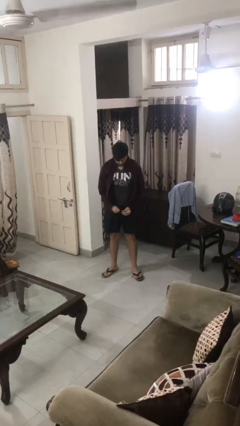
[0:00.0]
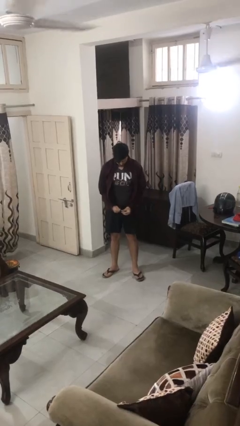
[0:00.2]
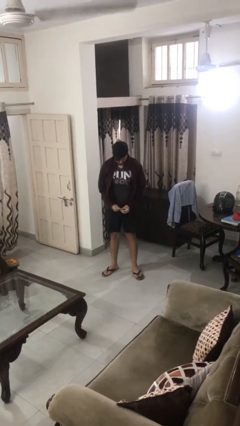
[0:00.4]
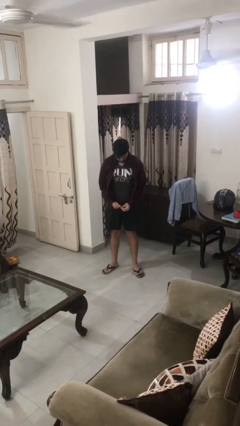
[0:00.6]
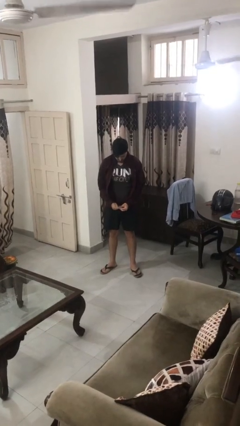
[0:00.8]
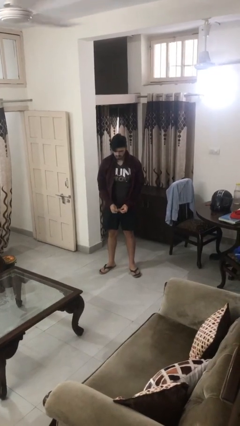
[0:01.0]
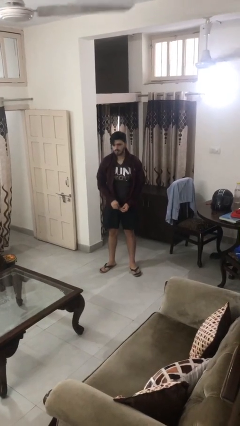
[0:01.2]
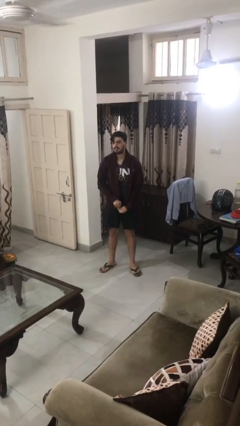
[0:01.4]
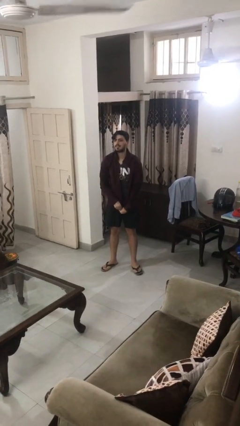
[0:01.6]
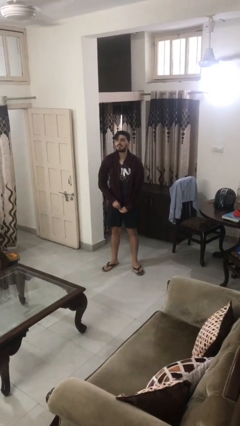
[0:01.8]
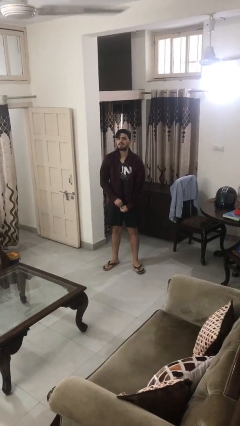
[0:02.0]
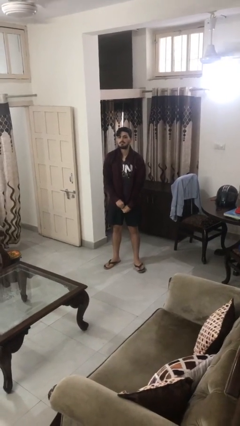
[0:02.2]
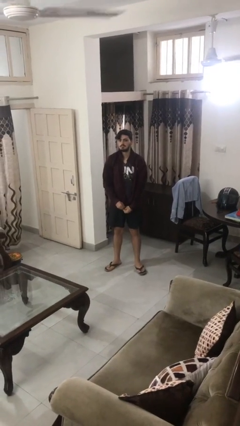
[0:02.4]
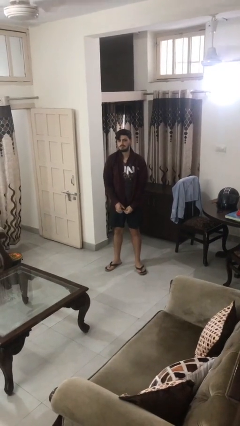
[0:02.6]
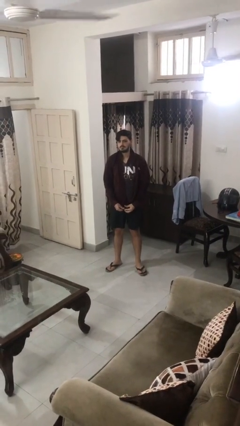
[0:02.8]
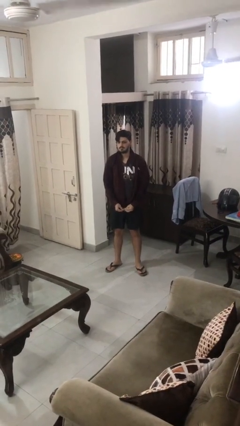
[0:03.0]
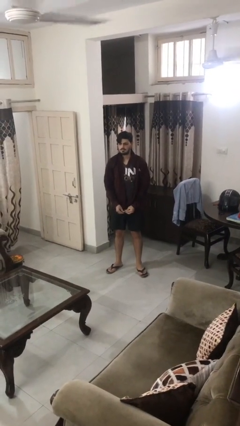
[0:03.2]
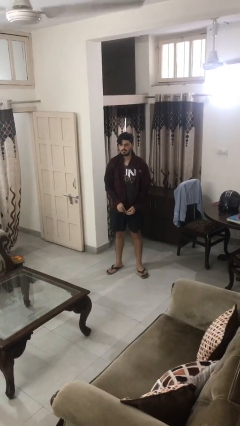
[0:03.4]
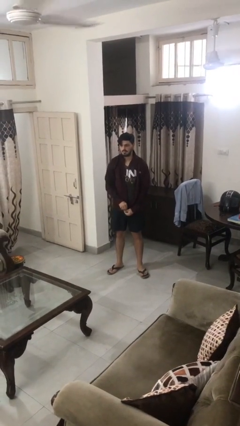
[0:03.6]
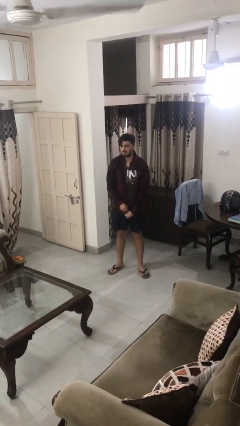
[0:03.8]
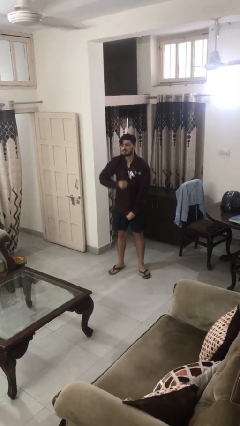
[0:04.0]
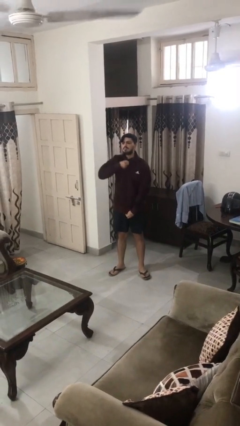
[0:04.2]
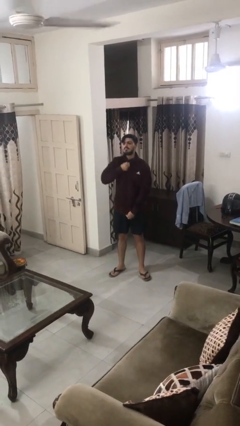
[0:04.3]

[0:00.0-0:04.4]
person zips up jacket

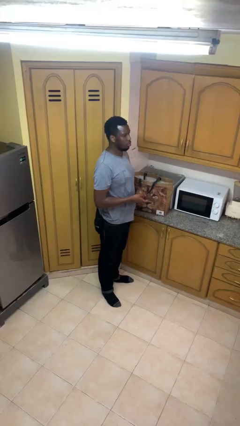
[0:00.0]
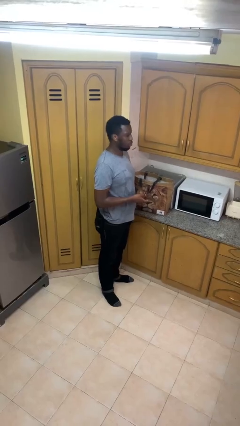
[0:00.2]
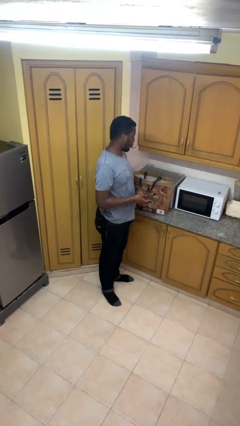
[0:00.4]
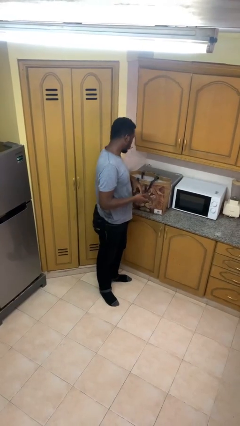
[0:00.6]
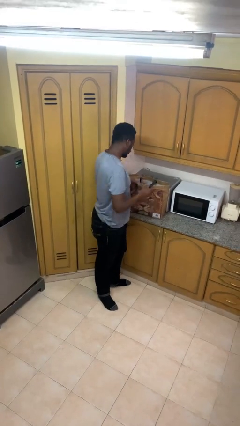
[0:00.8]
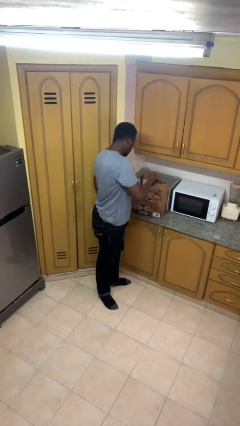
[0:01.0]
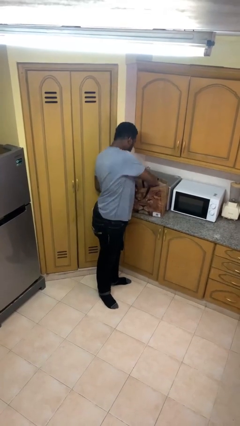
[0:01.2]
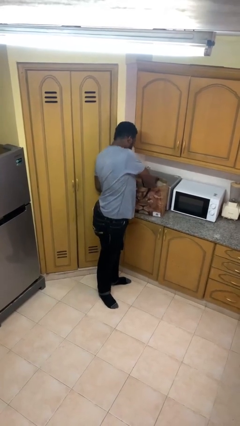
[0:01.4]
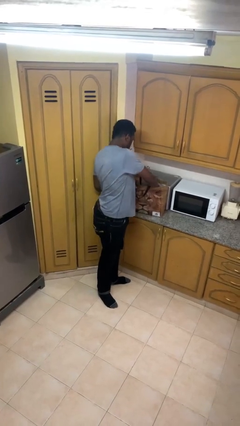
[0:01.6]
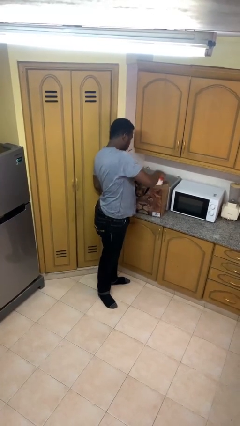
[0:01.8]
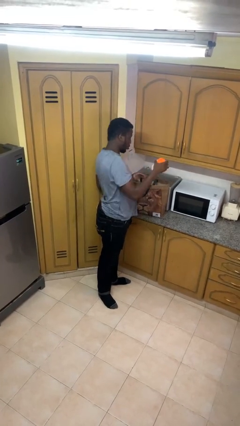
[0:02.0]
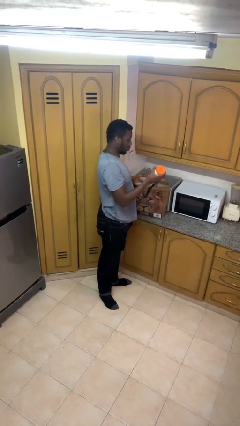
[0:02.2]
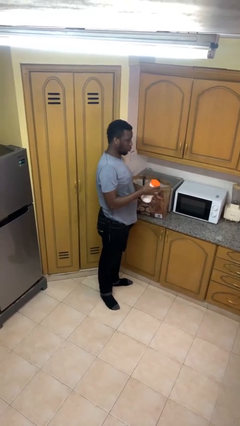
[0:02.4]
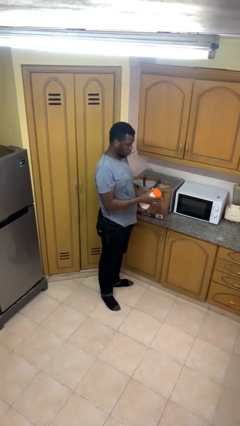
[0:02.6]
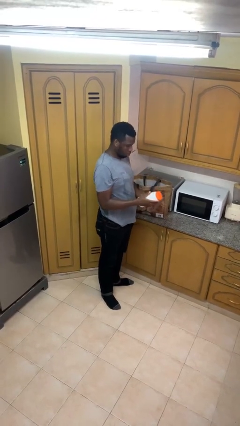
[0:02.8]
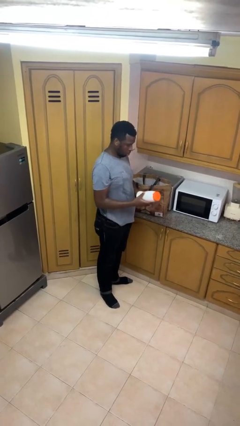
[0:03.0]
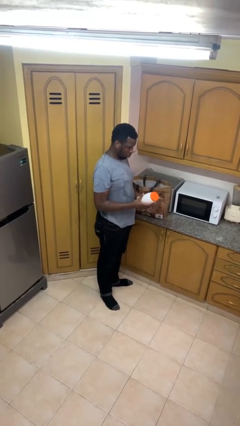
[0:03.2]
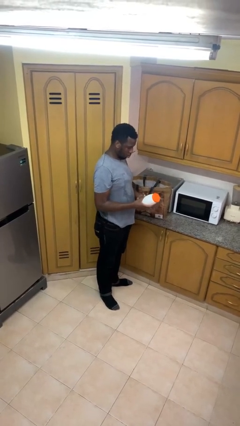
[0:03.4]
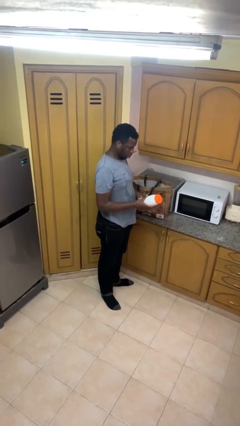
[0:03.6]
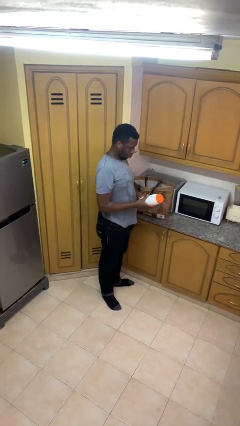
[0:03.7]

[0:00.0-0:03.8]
person takes object from bag

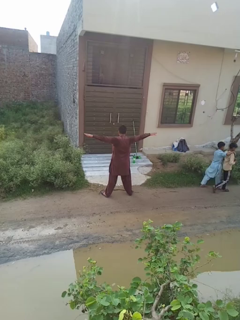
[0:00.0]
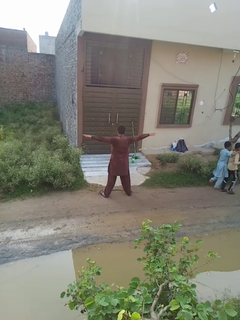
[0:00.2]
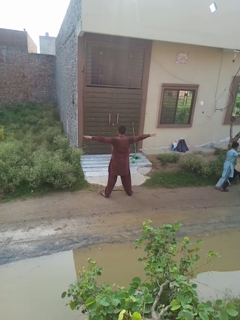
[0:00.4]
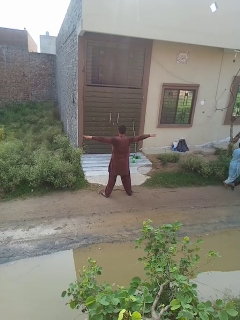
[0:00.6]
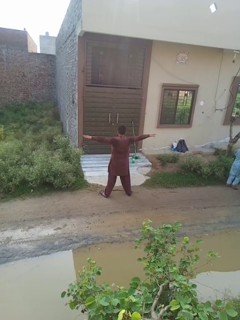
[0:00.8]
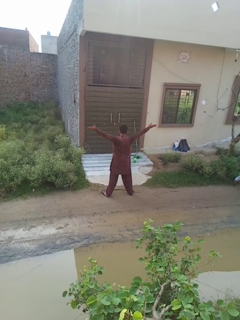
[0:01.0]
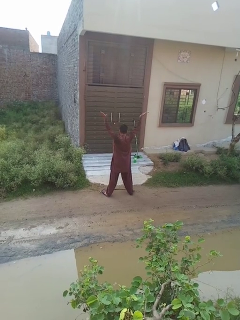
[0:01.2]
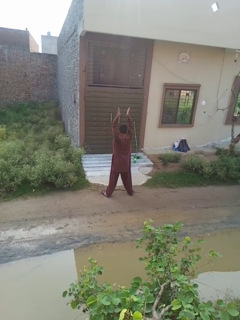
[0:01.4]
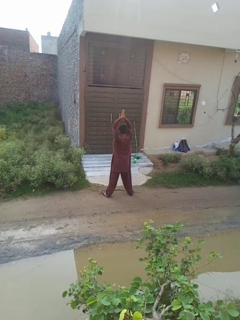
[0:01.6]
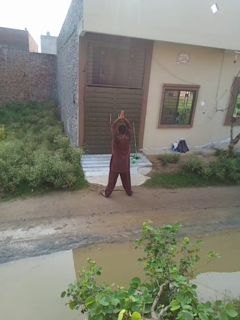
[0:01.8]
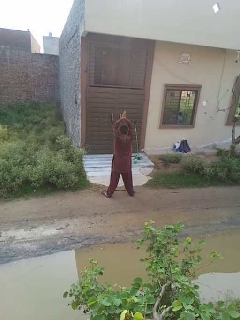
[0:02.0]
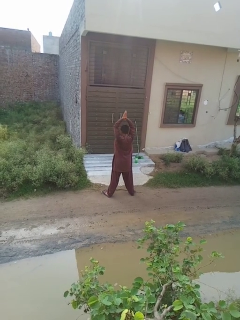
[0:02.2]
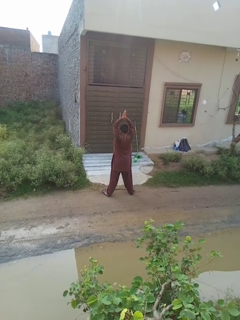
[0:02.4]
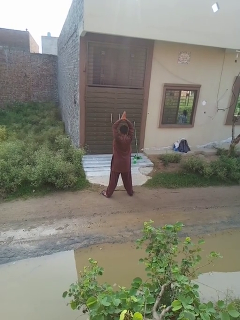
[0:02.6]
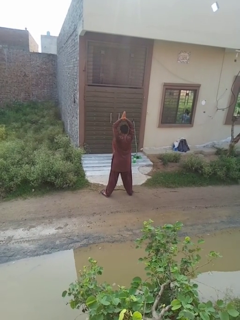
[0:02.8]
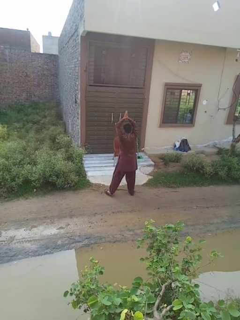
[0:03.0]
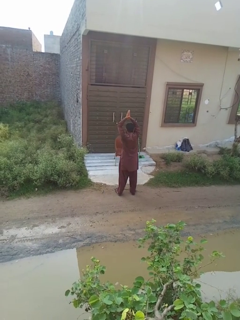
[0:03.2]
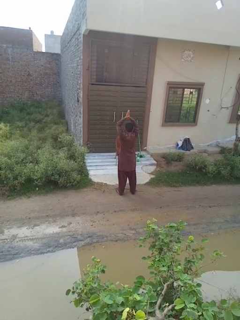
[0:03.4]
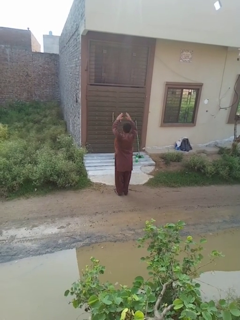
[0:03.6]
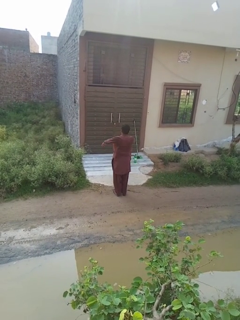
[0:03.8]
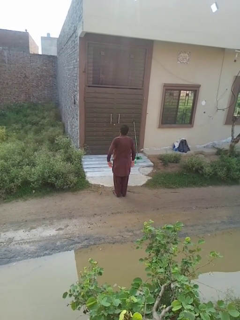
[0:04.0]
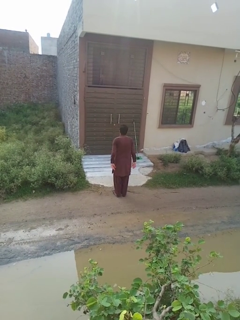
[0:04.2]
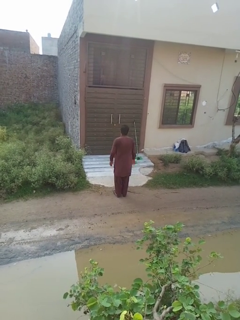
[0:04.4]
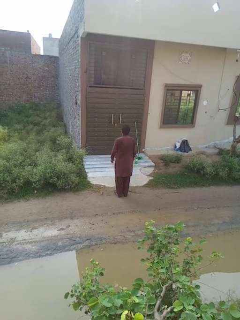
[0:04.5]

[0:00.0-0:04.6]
person stretches arms over head

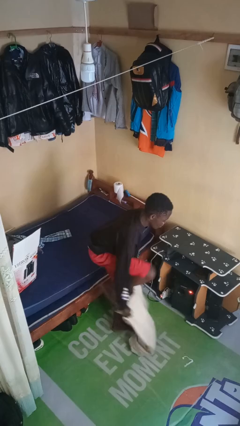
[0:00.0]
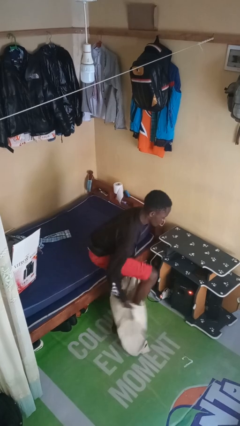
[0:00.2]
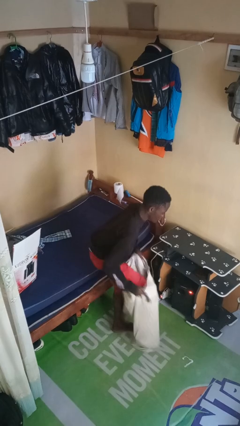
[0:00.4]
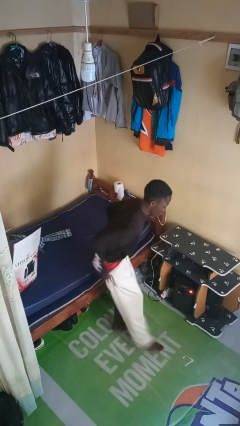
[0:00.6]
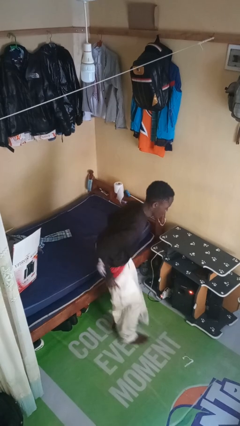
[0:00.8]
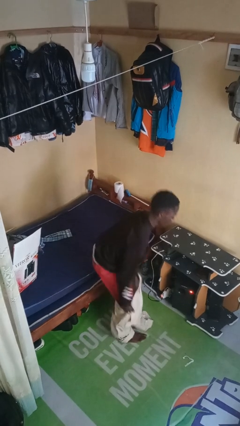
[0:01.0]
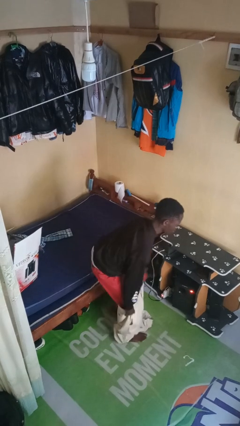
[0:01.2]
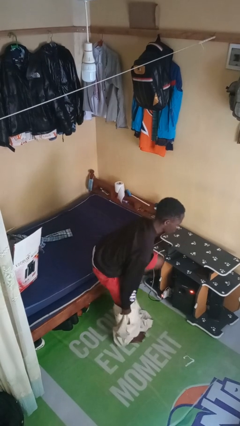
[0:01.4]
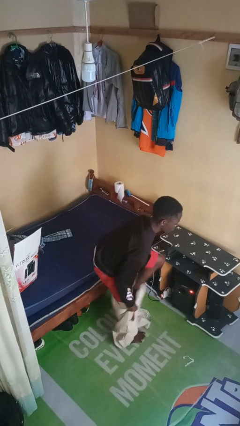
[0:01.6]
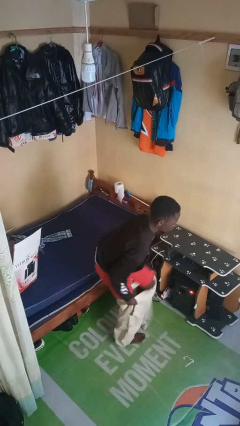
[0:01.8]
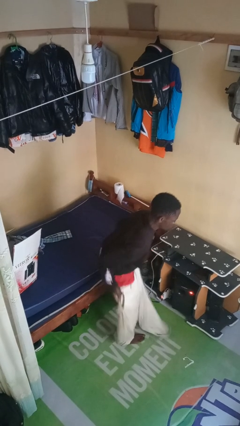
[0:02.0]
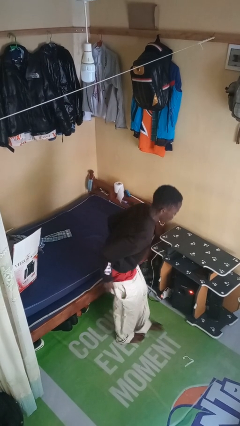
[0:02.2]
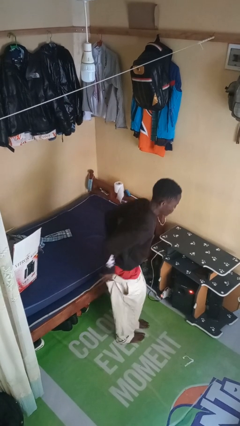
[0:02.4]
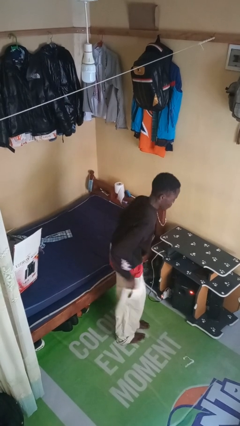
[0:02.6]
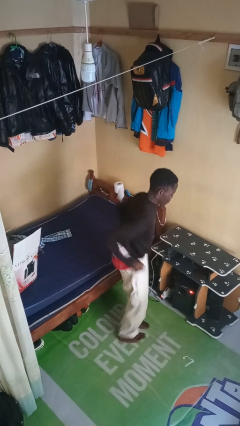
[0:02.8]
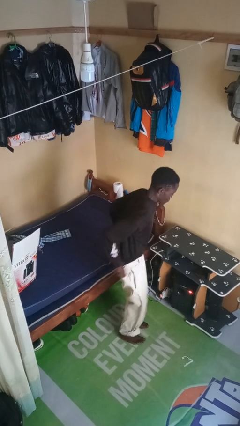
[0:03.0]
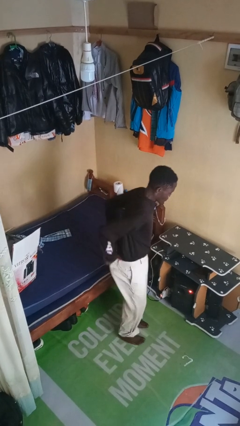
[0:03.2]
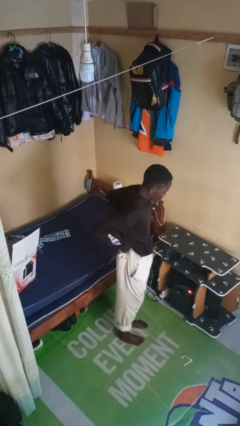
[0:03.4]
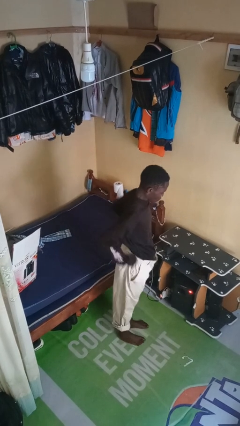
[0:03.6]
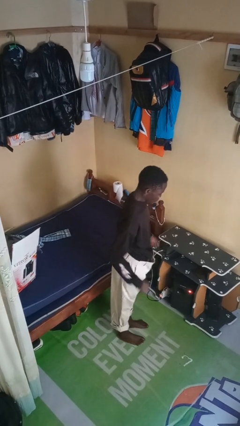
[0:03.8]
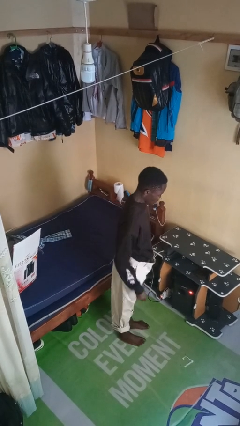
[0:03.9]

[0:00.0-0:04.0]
person puts on pants

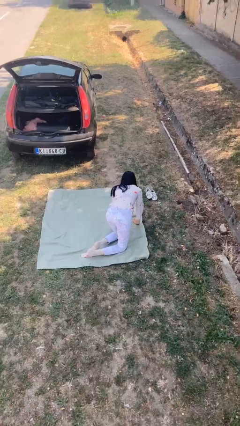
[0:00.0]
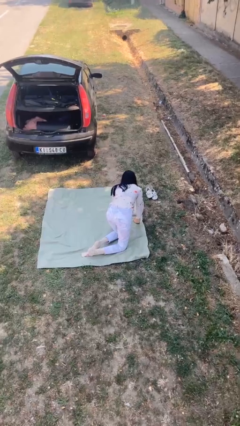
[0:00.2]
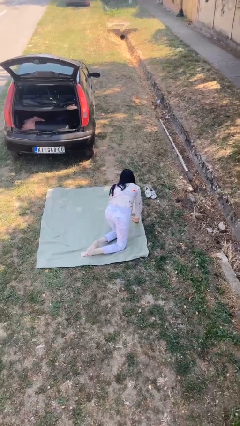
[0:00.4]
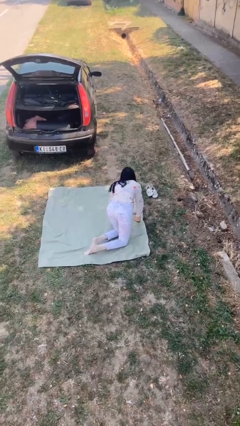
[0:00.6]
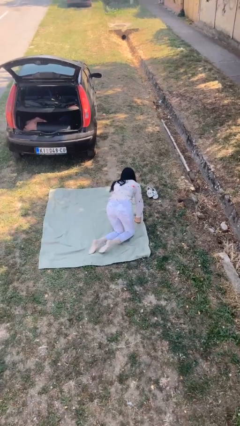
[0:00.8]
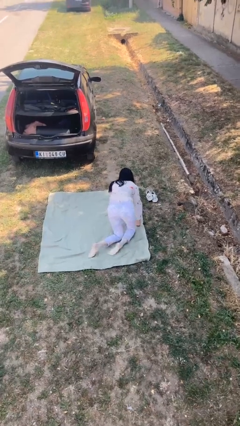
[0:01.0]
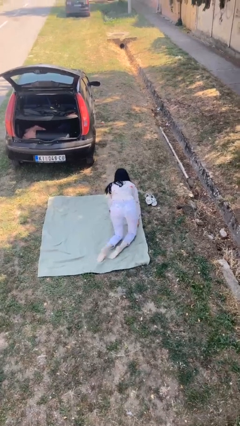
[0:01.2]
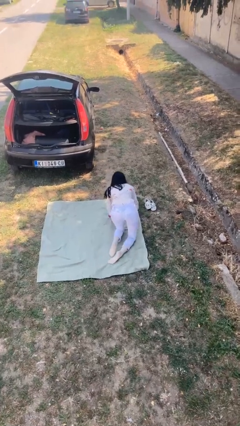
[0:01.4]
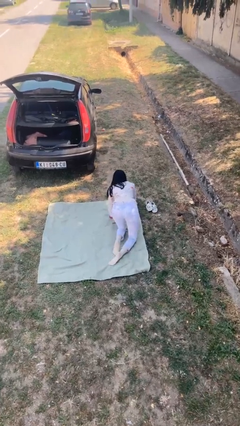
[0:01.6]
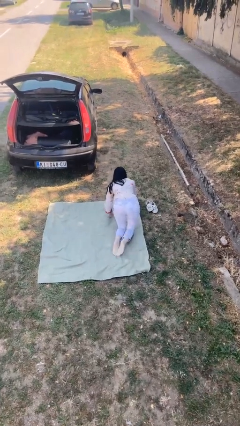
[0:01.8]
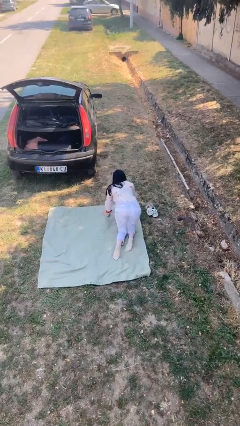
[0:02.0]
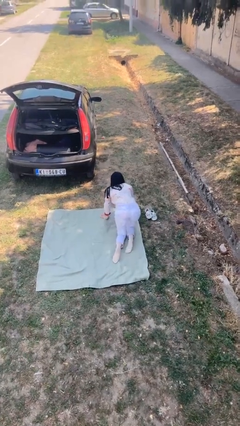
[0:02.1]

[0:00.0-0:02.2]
person crawls
